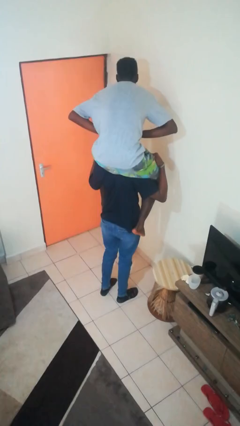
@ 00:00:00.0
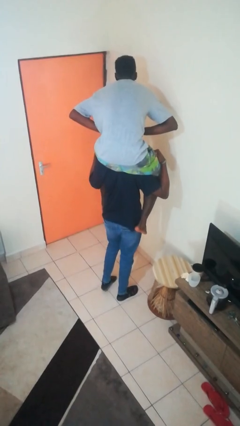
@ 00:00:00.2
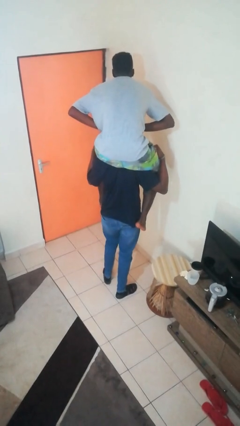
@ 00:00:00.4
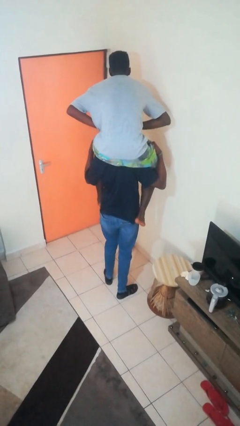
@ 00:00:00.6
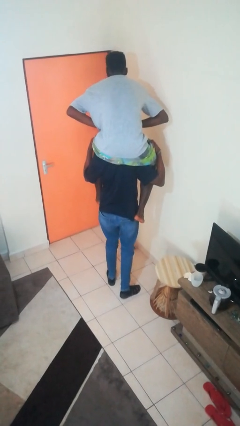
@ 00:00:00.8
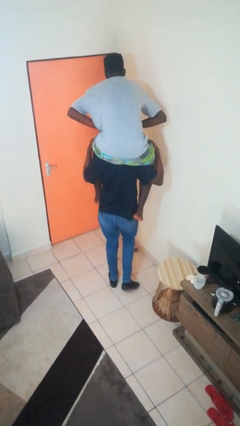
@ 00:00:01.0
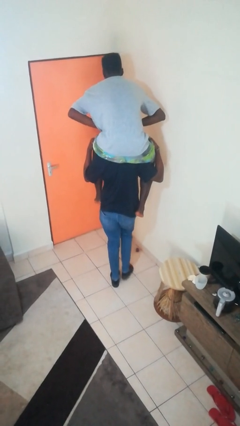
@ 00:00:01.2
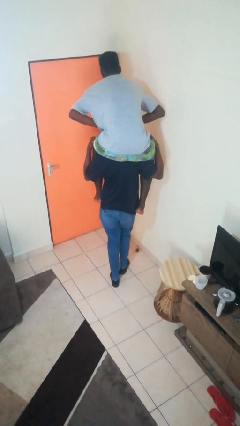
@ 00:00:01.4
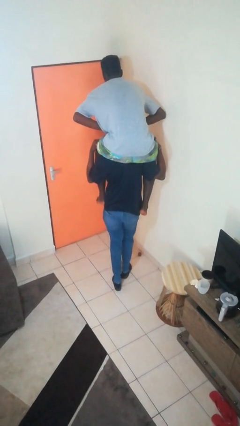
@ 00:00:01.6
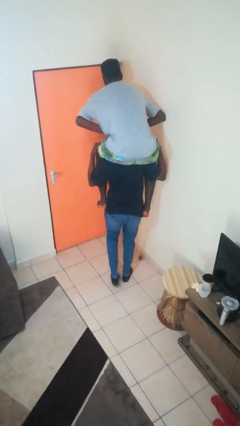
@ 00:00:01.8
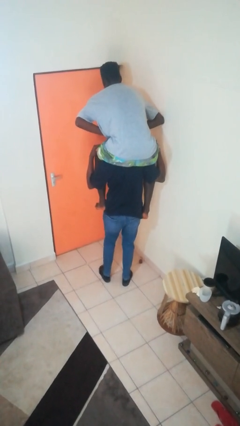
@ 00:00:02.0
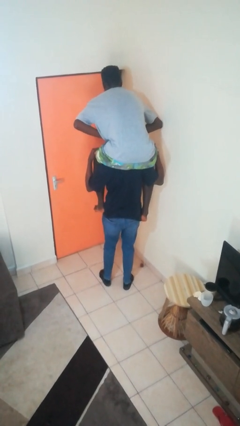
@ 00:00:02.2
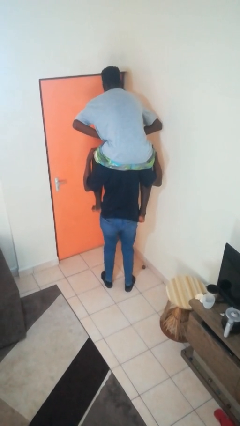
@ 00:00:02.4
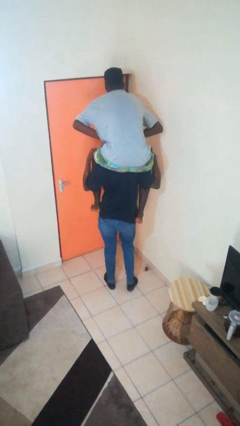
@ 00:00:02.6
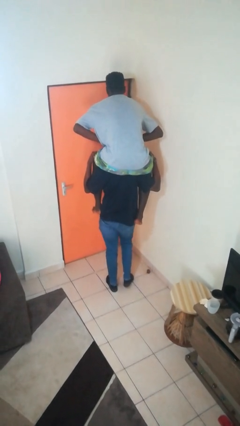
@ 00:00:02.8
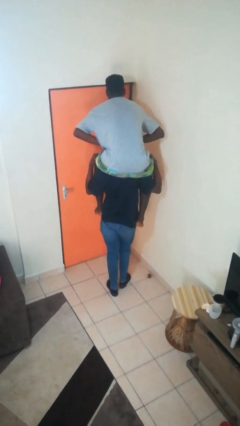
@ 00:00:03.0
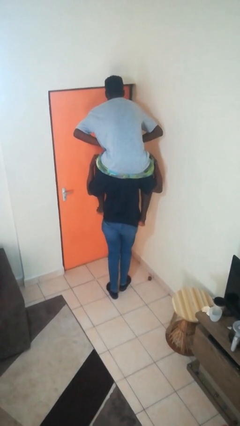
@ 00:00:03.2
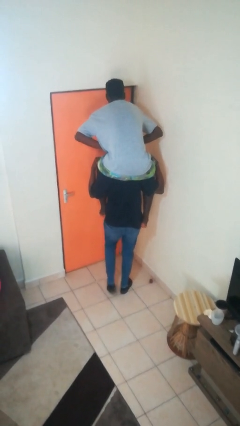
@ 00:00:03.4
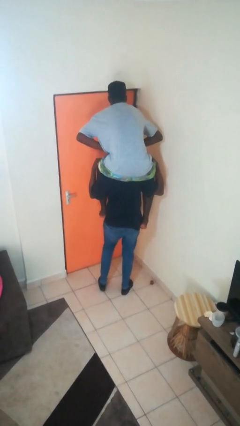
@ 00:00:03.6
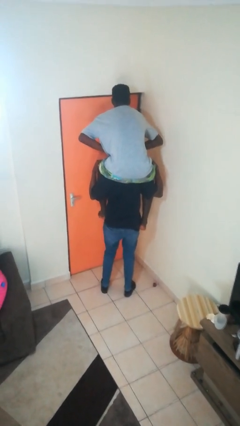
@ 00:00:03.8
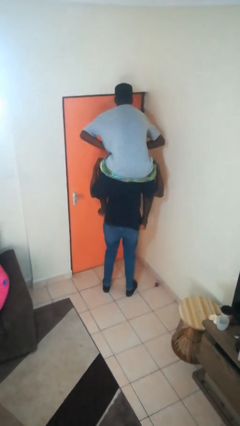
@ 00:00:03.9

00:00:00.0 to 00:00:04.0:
person carries person on shoulders

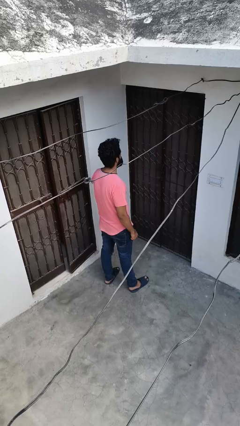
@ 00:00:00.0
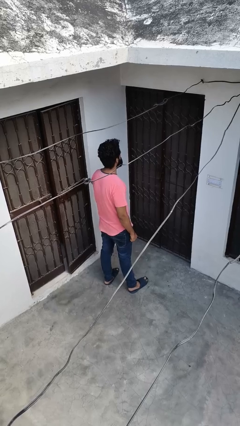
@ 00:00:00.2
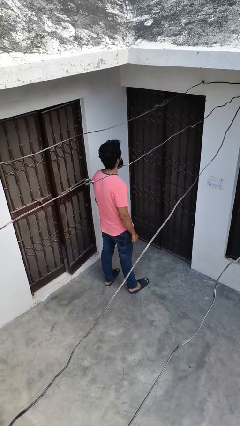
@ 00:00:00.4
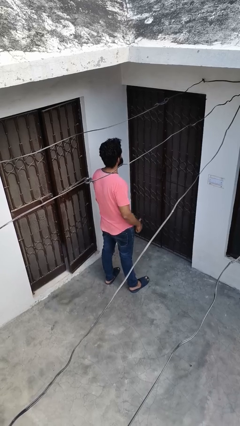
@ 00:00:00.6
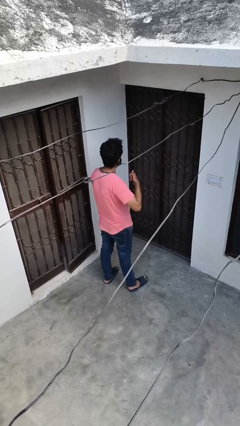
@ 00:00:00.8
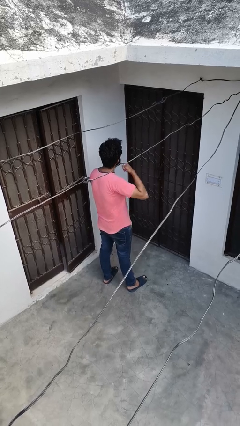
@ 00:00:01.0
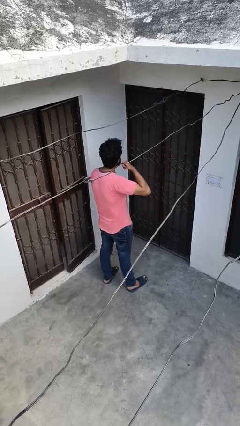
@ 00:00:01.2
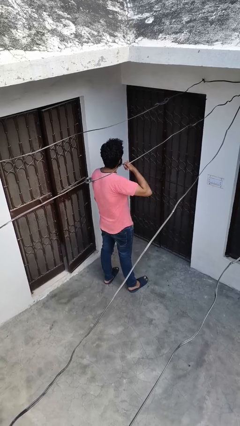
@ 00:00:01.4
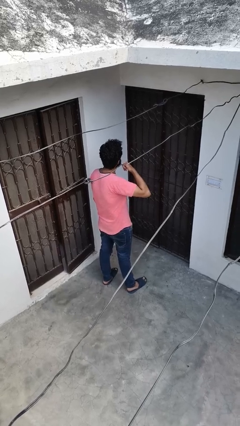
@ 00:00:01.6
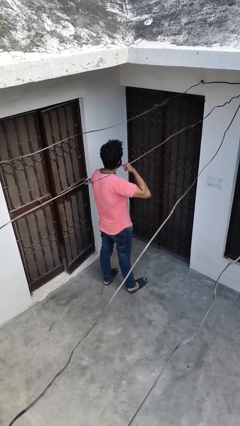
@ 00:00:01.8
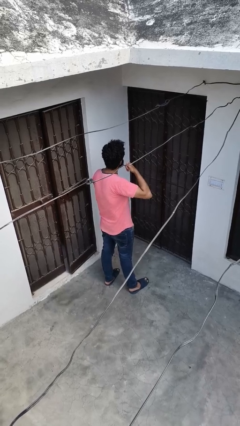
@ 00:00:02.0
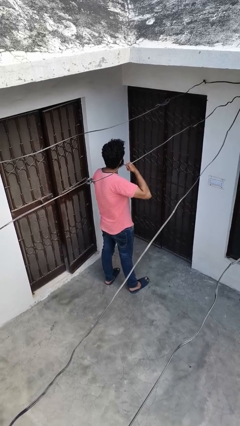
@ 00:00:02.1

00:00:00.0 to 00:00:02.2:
person gestures call me

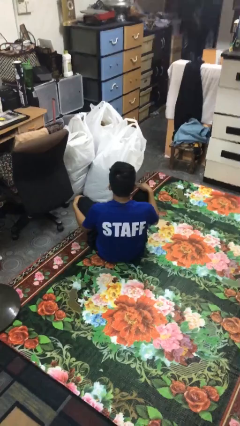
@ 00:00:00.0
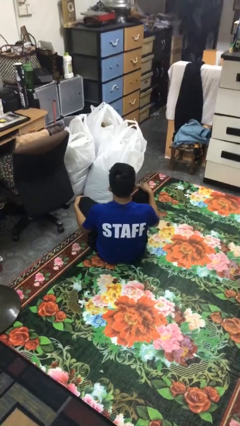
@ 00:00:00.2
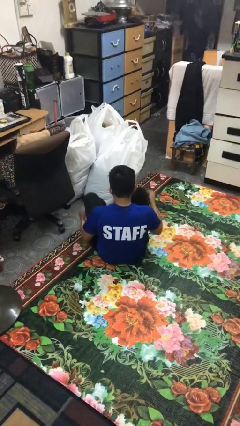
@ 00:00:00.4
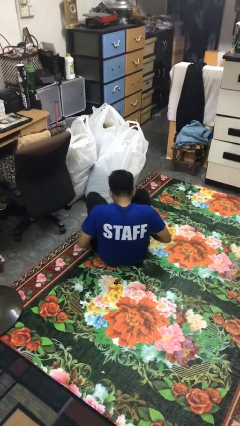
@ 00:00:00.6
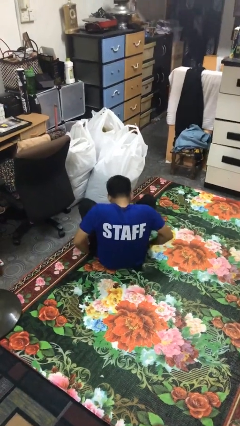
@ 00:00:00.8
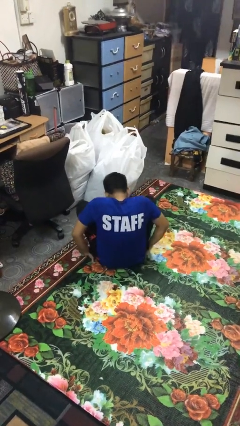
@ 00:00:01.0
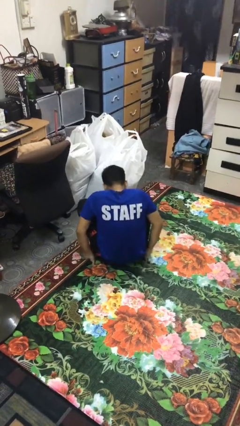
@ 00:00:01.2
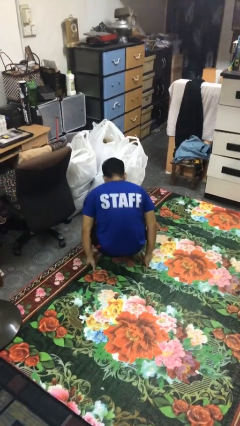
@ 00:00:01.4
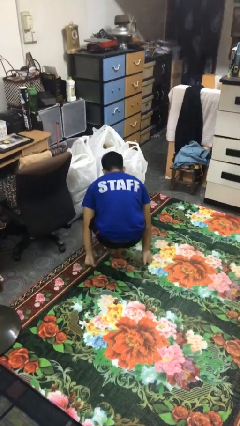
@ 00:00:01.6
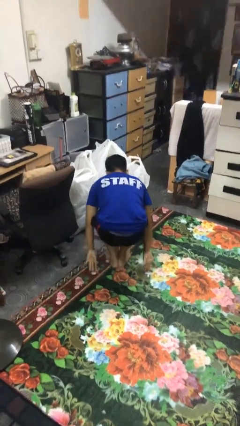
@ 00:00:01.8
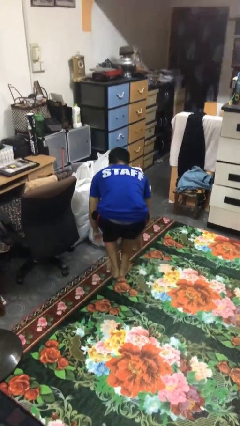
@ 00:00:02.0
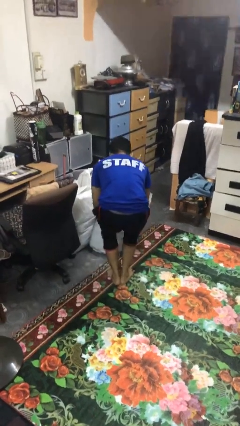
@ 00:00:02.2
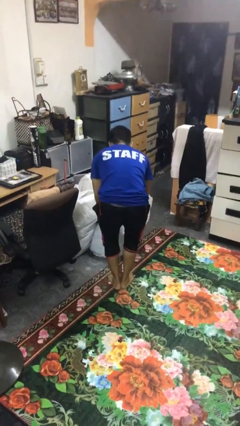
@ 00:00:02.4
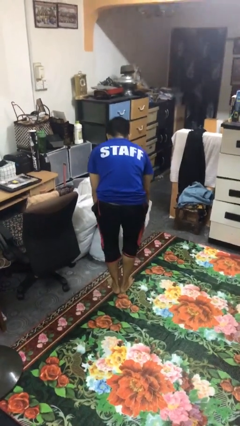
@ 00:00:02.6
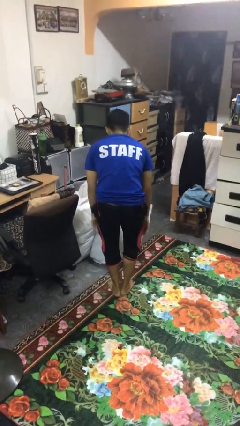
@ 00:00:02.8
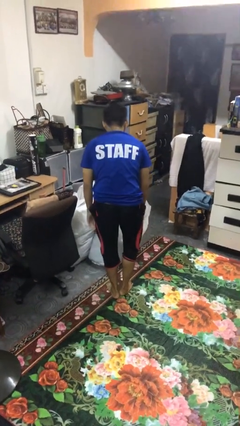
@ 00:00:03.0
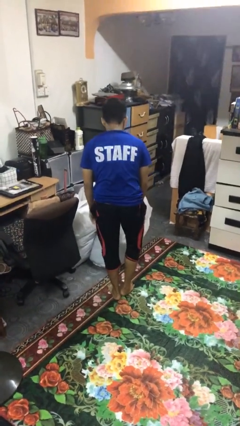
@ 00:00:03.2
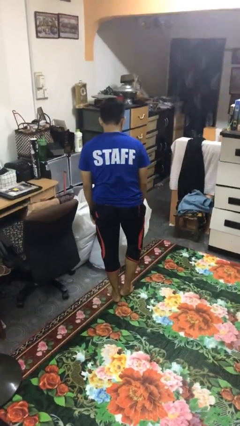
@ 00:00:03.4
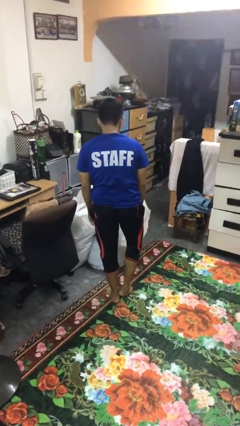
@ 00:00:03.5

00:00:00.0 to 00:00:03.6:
person stands up from floor

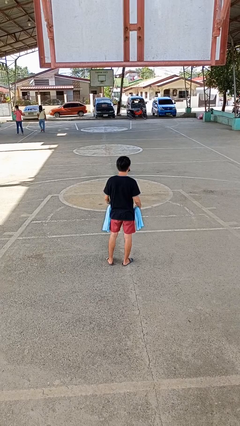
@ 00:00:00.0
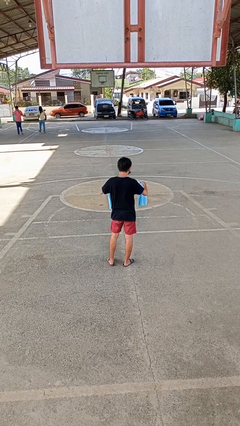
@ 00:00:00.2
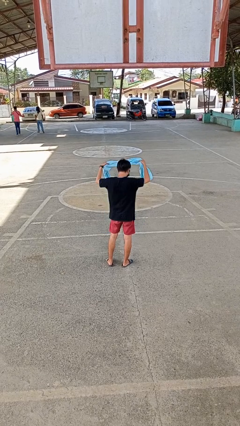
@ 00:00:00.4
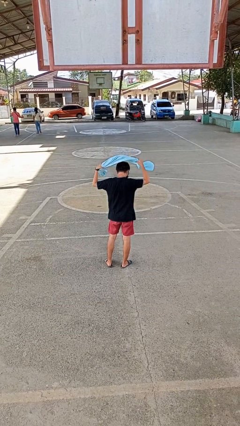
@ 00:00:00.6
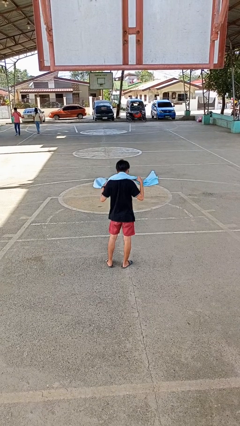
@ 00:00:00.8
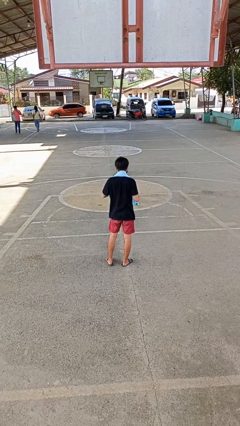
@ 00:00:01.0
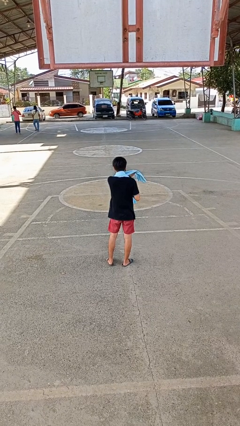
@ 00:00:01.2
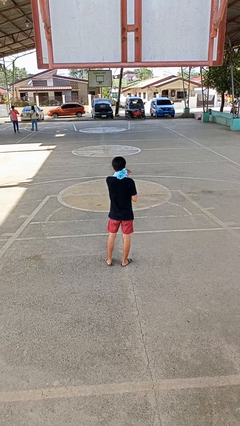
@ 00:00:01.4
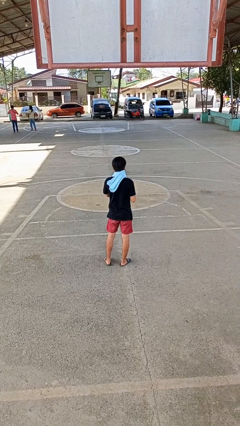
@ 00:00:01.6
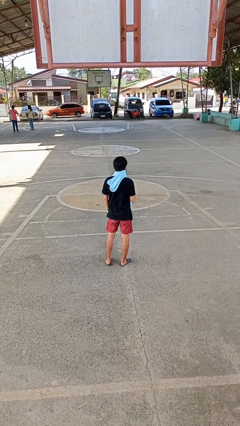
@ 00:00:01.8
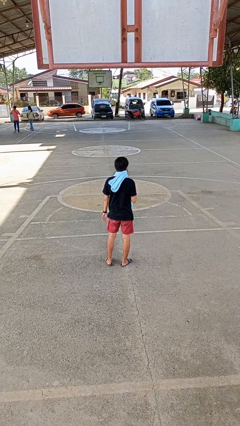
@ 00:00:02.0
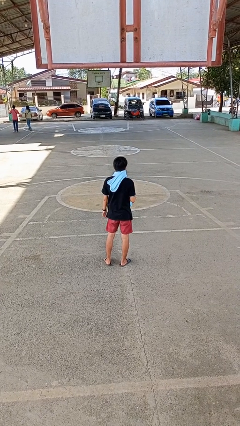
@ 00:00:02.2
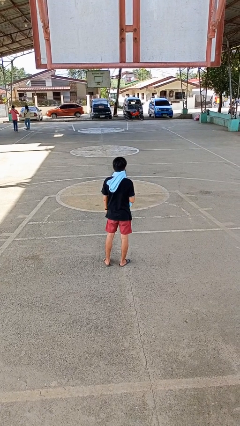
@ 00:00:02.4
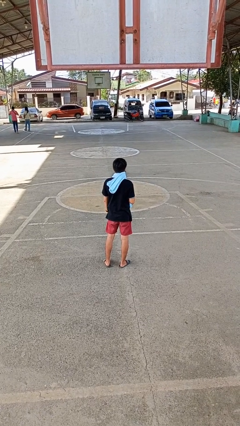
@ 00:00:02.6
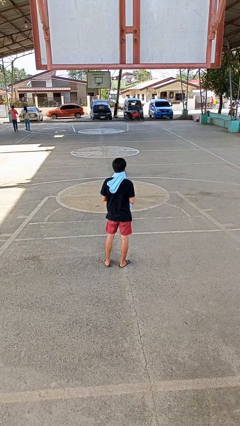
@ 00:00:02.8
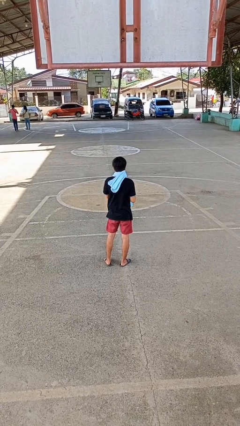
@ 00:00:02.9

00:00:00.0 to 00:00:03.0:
person puts on scarf

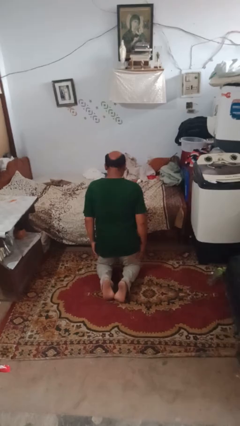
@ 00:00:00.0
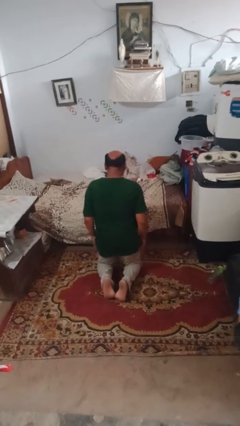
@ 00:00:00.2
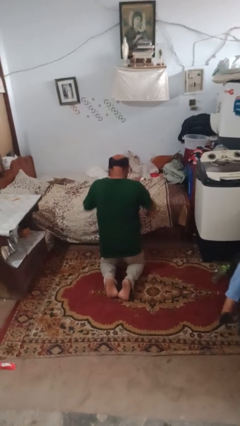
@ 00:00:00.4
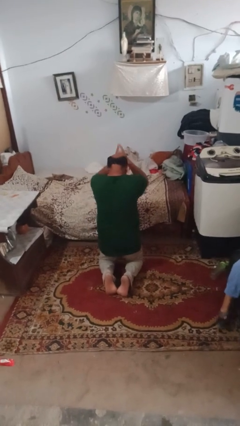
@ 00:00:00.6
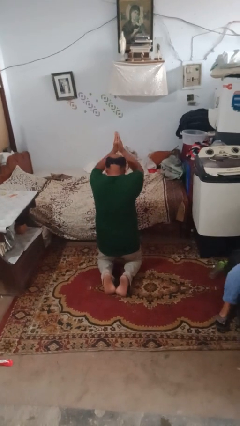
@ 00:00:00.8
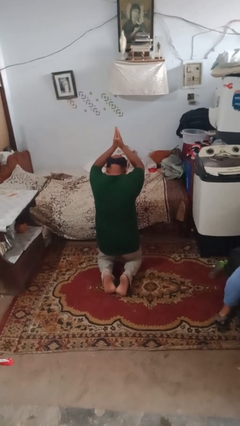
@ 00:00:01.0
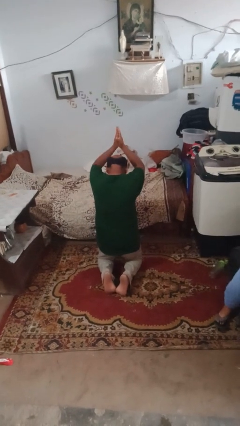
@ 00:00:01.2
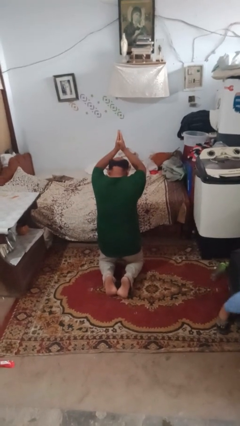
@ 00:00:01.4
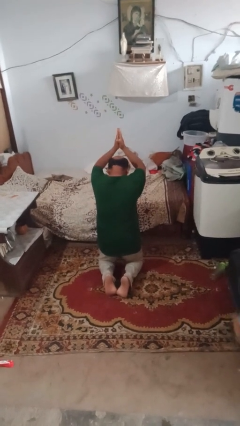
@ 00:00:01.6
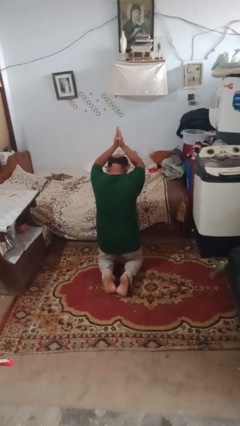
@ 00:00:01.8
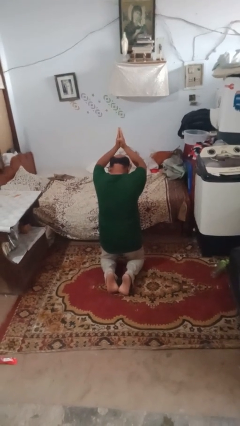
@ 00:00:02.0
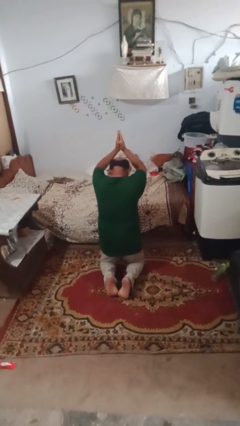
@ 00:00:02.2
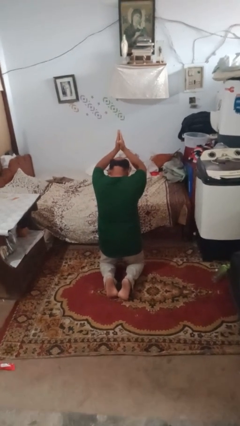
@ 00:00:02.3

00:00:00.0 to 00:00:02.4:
person prays

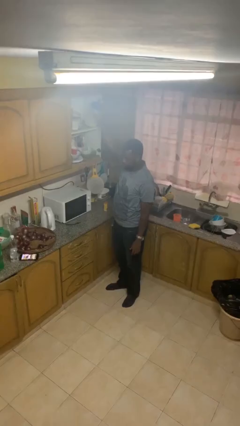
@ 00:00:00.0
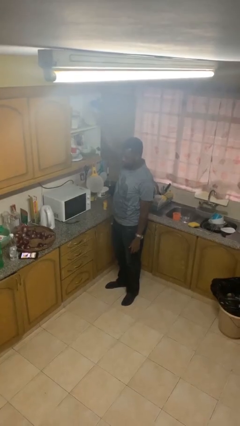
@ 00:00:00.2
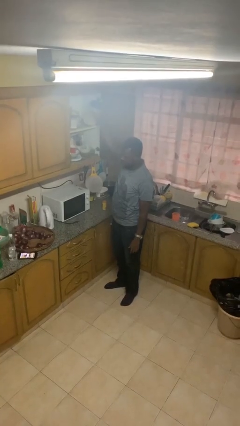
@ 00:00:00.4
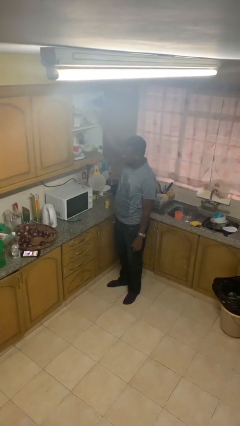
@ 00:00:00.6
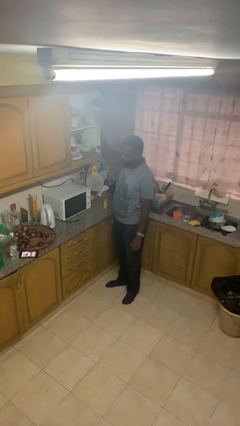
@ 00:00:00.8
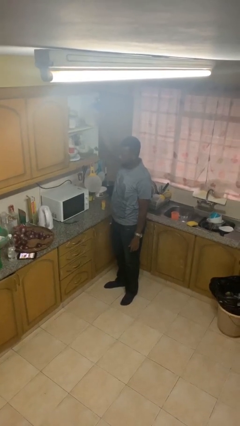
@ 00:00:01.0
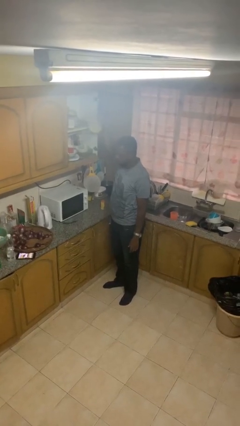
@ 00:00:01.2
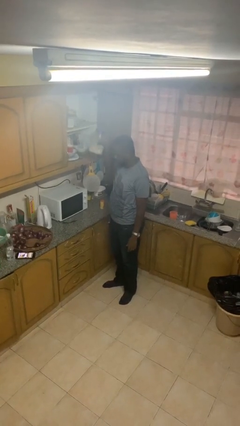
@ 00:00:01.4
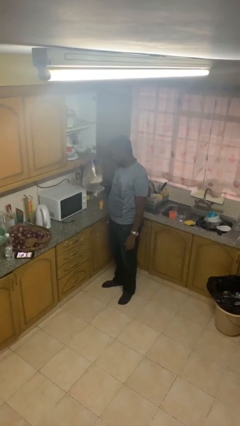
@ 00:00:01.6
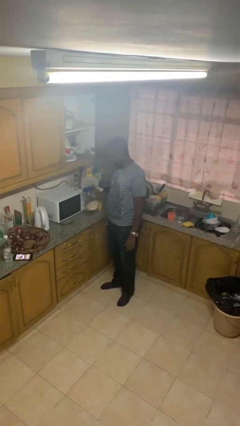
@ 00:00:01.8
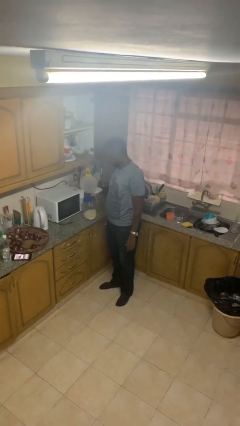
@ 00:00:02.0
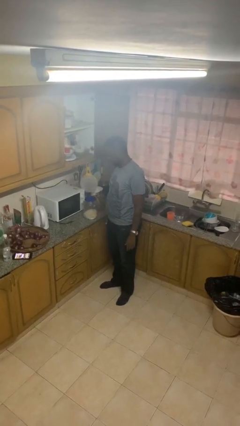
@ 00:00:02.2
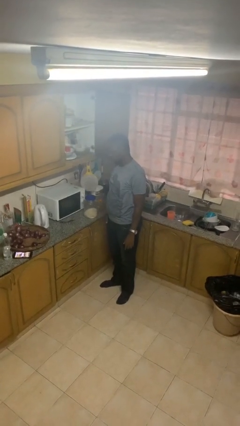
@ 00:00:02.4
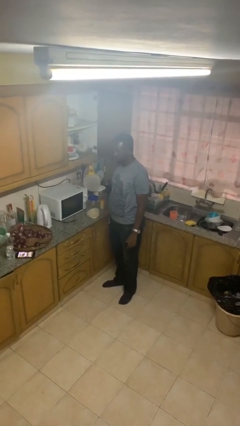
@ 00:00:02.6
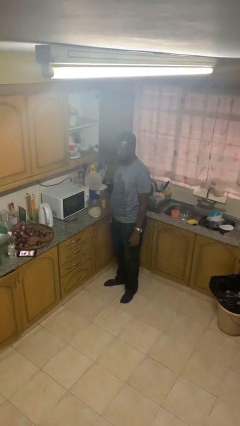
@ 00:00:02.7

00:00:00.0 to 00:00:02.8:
person puts down object on table
